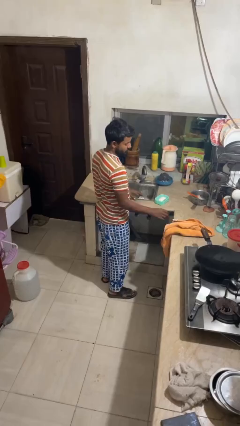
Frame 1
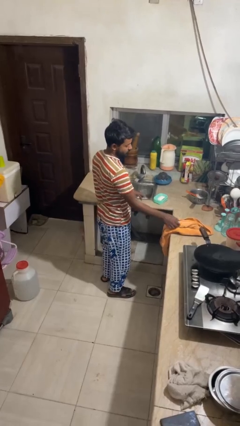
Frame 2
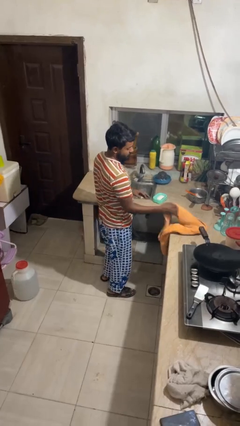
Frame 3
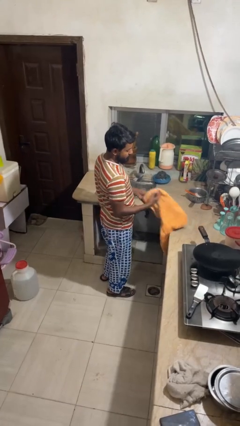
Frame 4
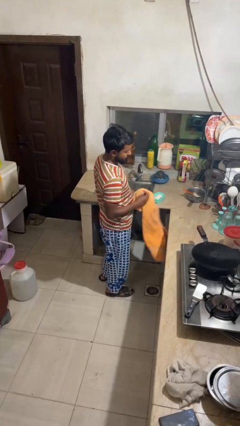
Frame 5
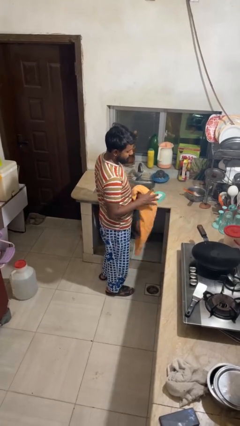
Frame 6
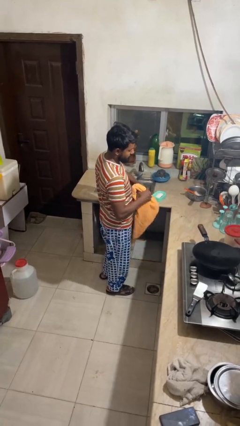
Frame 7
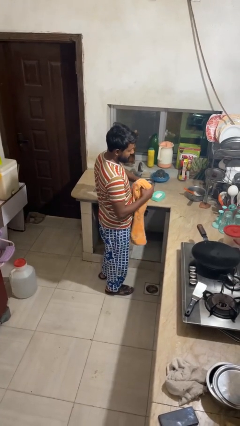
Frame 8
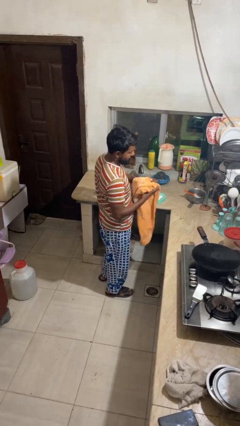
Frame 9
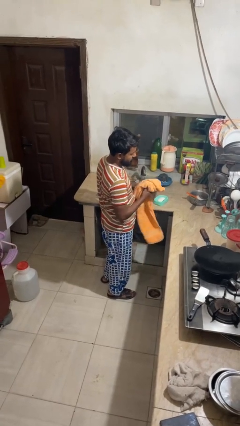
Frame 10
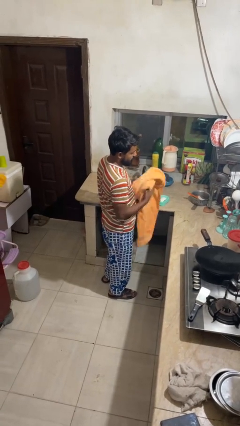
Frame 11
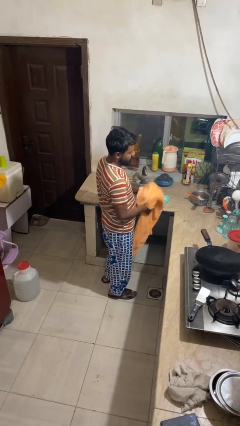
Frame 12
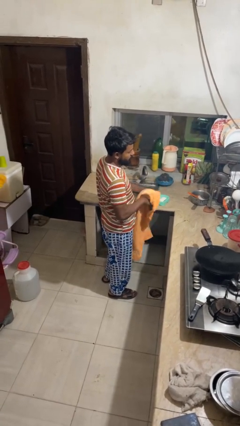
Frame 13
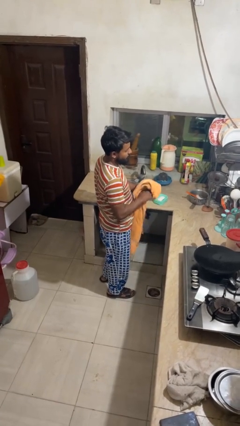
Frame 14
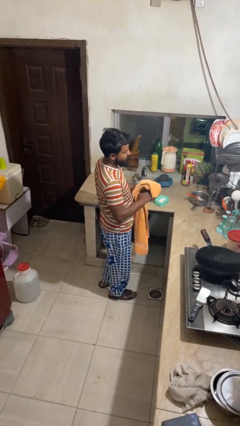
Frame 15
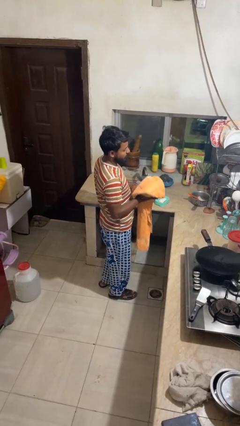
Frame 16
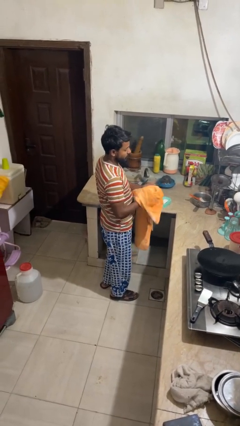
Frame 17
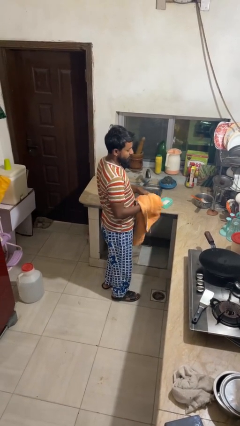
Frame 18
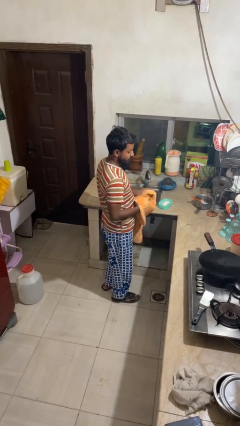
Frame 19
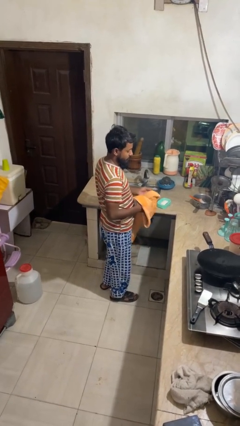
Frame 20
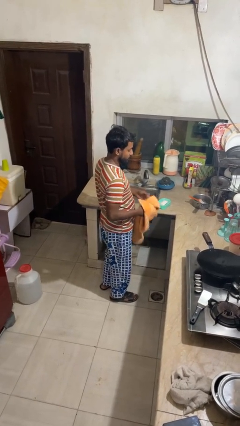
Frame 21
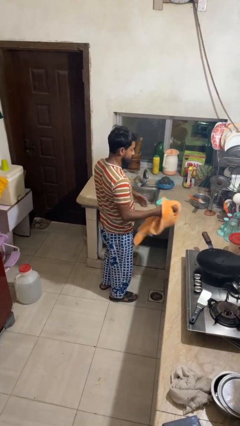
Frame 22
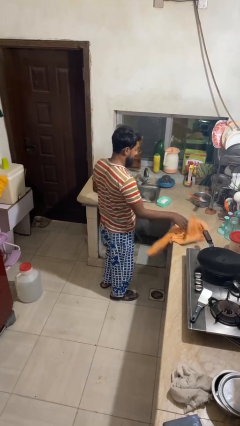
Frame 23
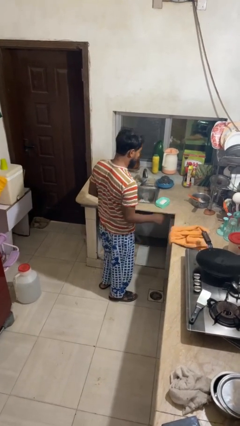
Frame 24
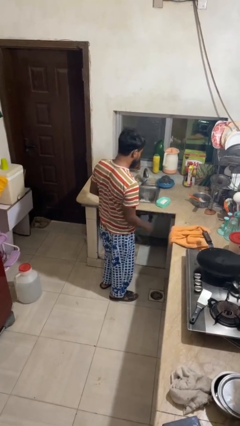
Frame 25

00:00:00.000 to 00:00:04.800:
person dries hands with towel

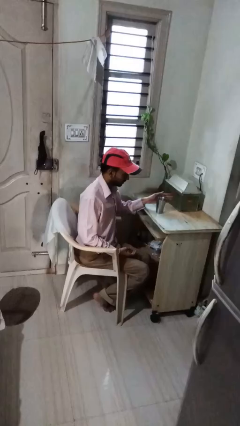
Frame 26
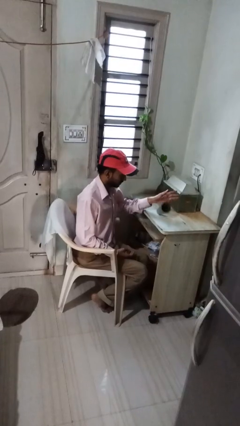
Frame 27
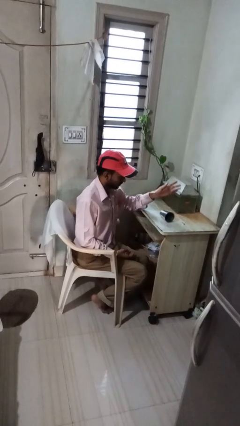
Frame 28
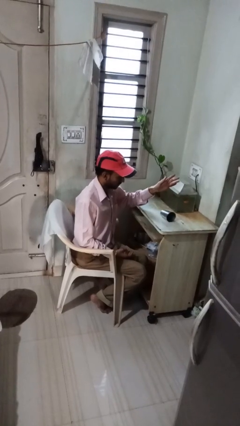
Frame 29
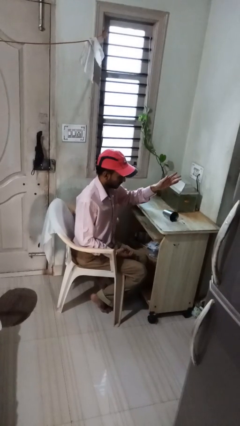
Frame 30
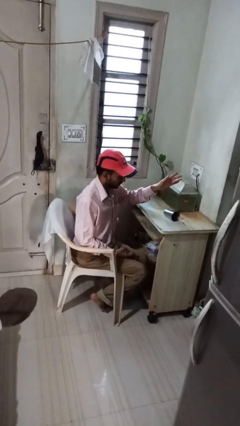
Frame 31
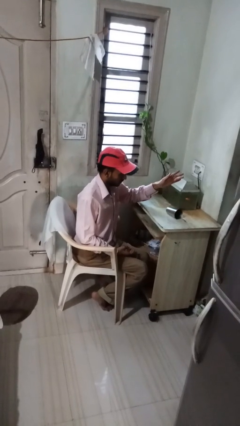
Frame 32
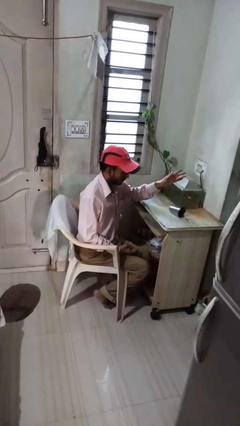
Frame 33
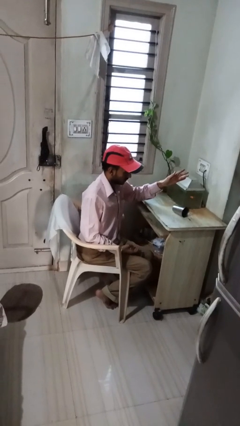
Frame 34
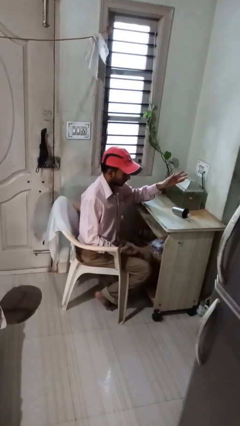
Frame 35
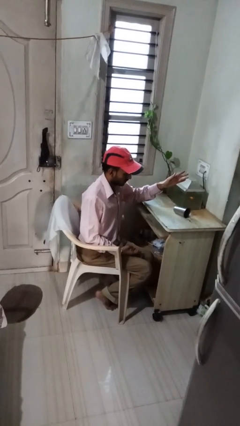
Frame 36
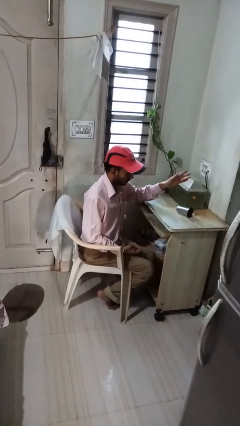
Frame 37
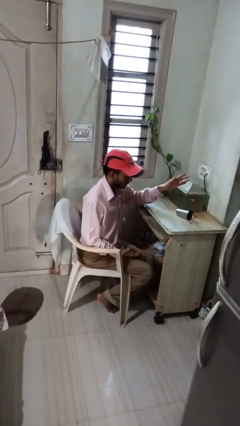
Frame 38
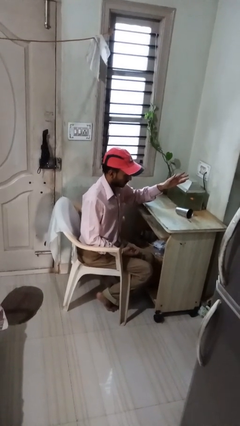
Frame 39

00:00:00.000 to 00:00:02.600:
person spills on table

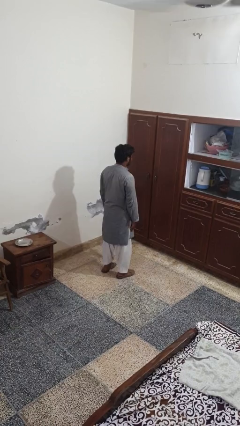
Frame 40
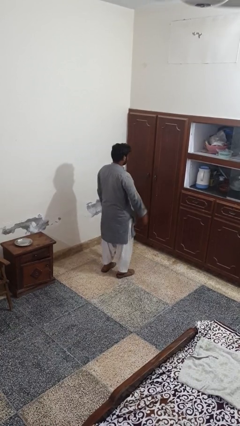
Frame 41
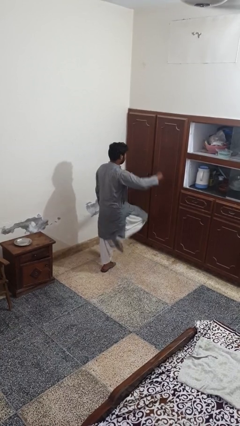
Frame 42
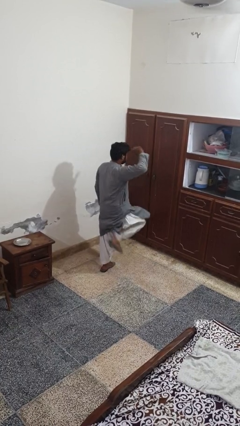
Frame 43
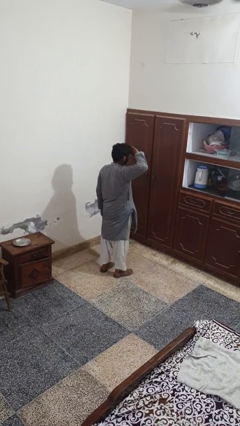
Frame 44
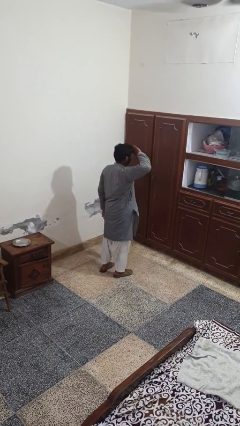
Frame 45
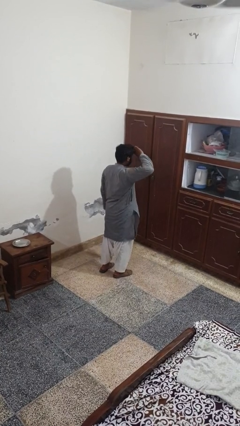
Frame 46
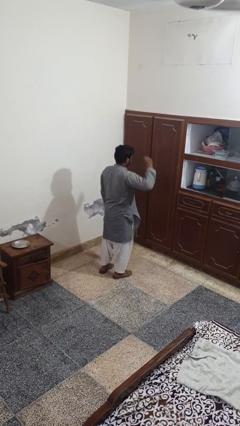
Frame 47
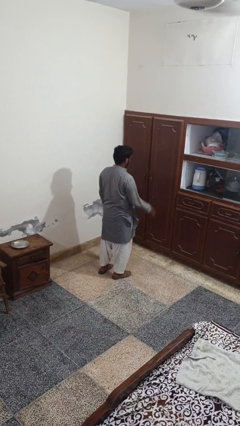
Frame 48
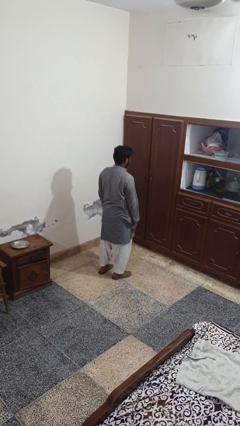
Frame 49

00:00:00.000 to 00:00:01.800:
person salutes

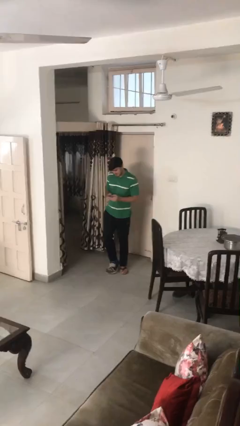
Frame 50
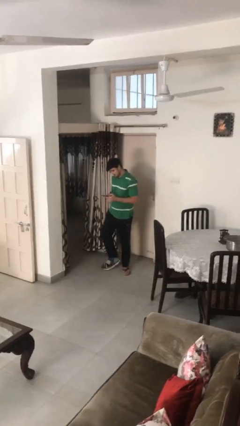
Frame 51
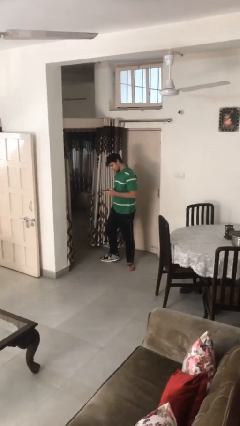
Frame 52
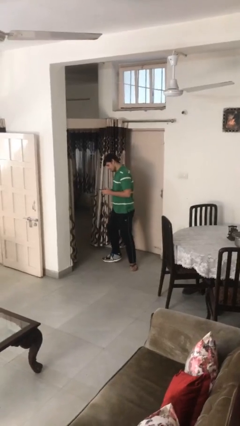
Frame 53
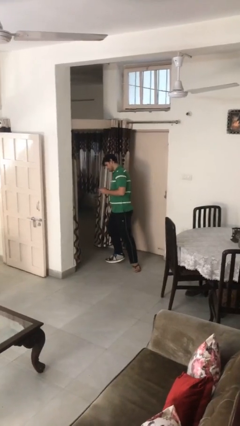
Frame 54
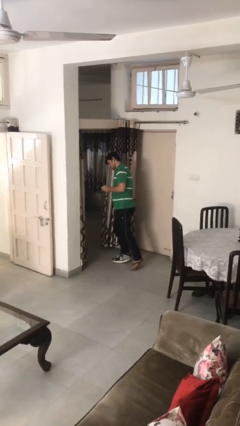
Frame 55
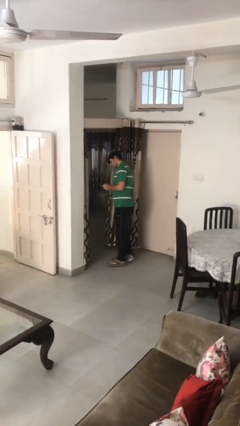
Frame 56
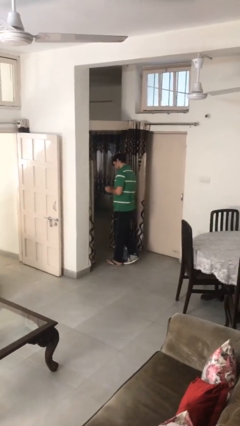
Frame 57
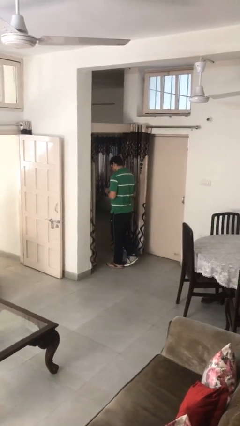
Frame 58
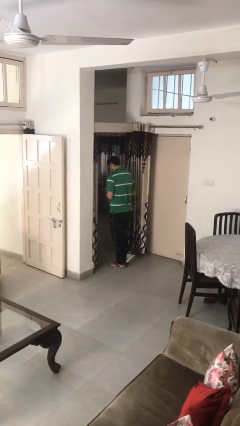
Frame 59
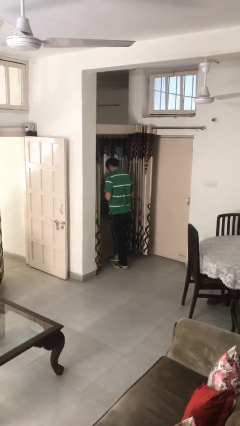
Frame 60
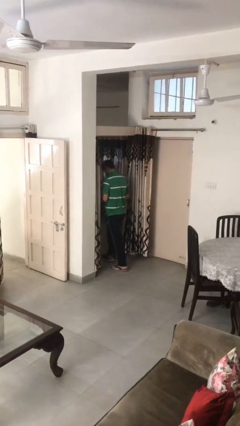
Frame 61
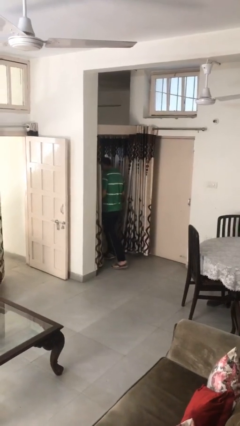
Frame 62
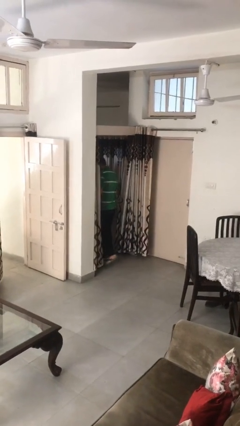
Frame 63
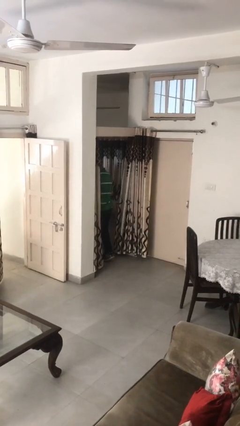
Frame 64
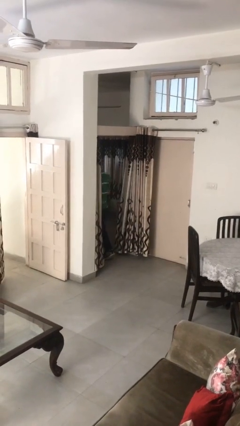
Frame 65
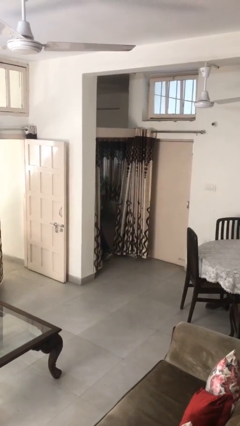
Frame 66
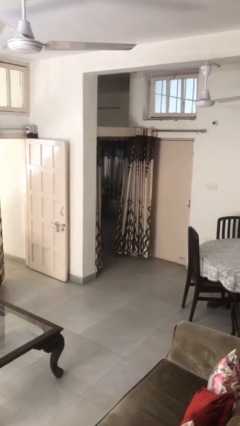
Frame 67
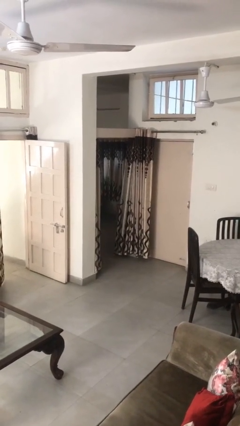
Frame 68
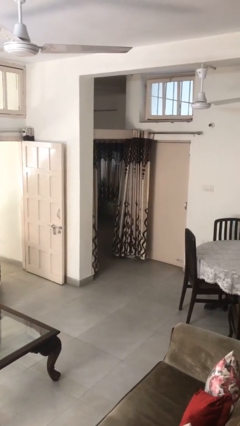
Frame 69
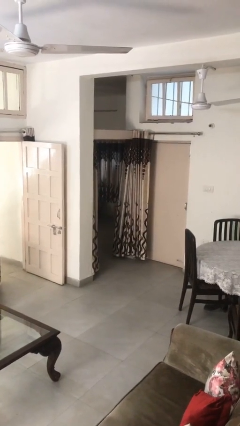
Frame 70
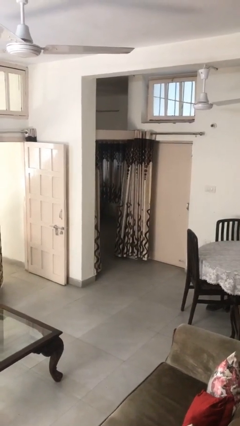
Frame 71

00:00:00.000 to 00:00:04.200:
person exits scene through structure

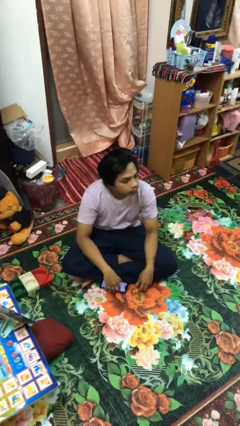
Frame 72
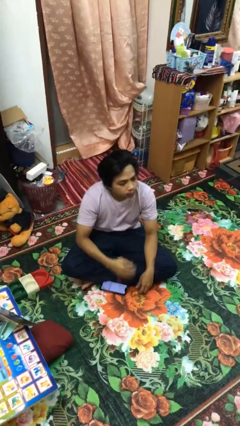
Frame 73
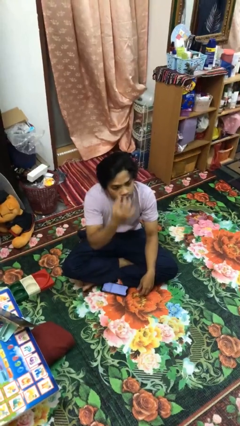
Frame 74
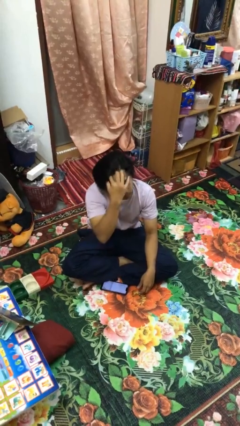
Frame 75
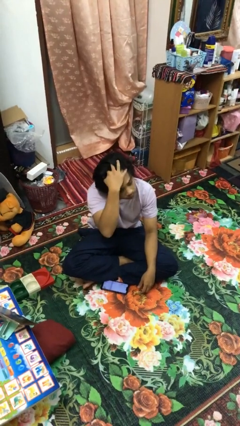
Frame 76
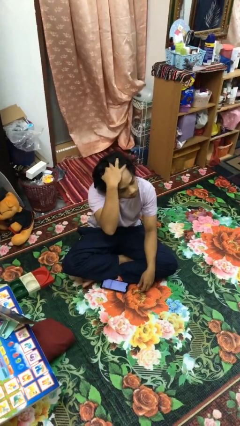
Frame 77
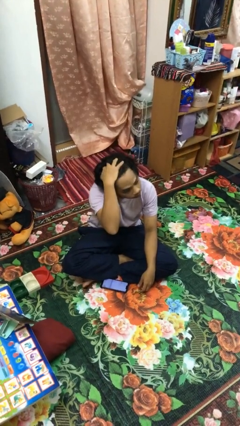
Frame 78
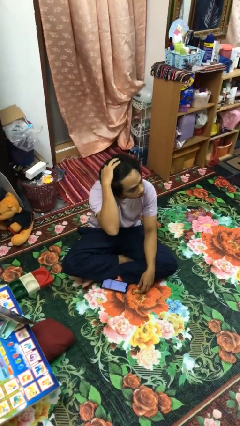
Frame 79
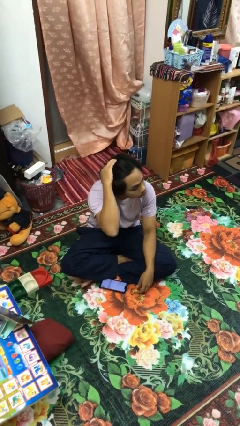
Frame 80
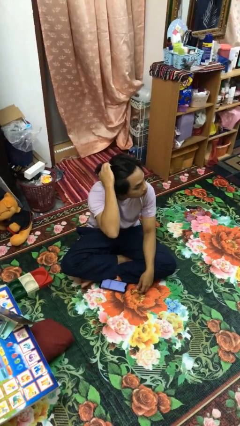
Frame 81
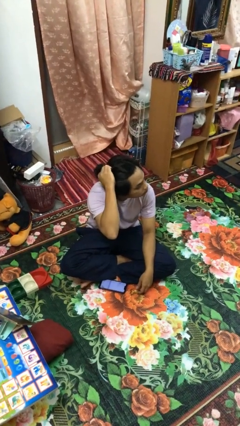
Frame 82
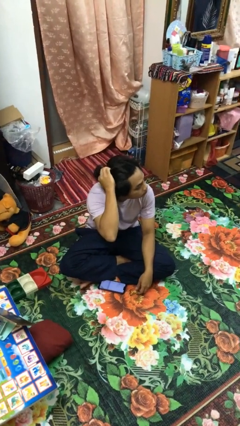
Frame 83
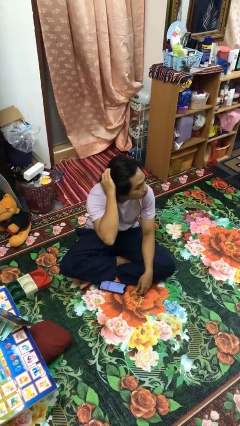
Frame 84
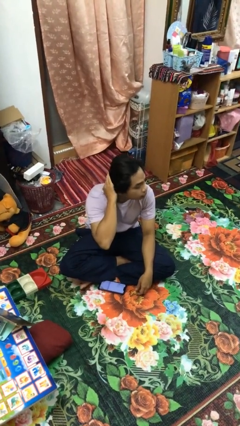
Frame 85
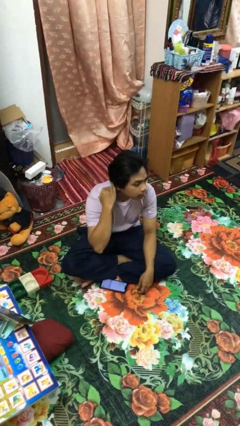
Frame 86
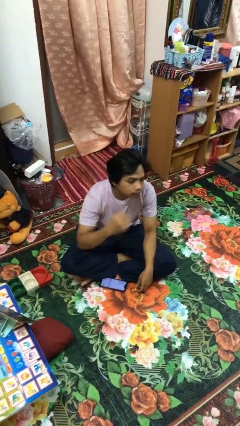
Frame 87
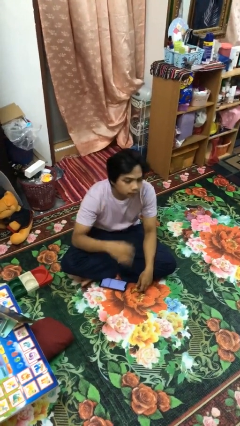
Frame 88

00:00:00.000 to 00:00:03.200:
person strokes hair

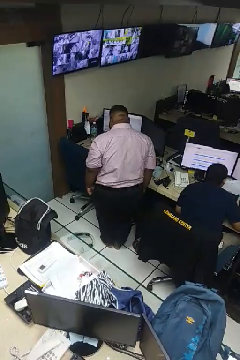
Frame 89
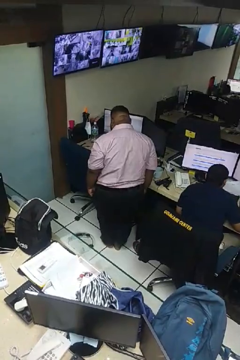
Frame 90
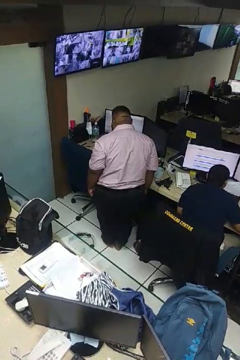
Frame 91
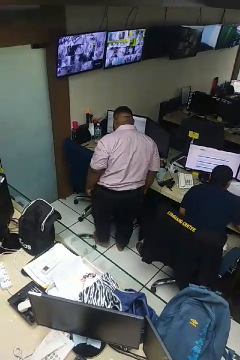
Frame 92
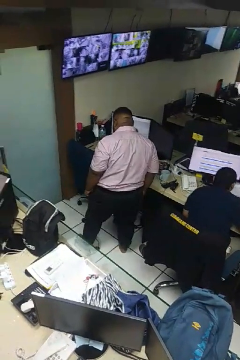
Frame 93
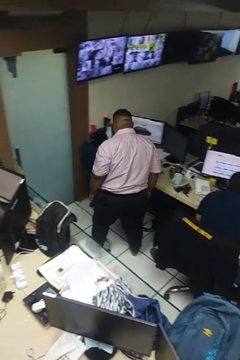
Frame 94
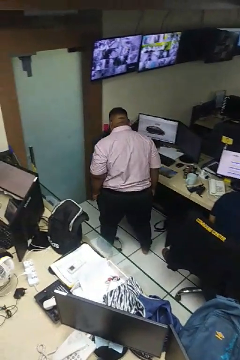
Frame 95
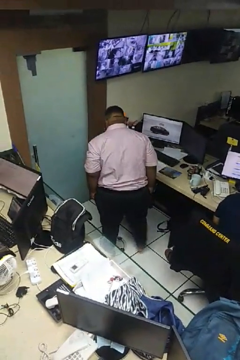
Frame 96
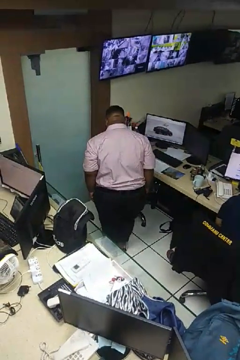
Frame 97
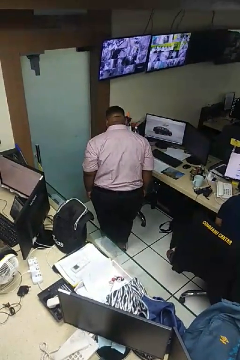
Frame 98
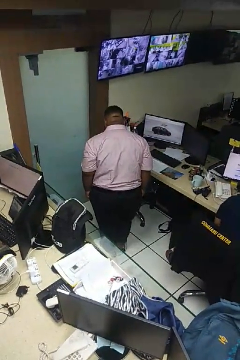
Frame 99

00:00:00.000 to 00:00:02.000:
person uses bodyweight scale
